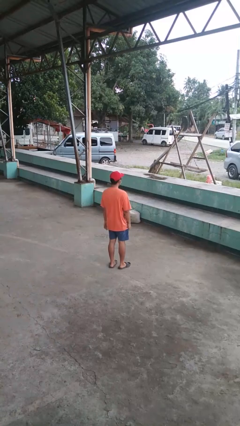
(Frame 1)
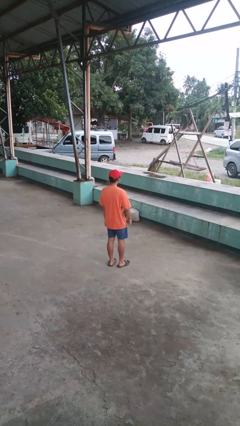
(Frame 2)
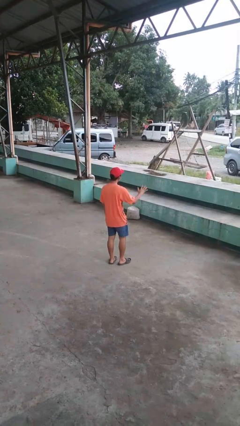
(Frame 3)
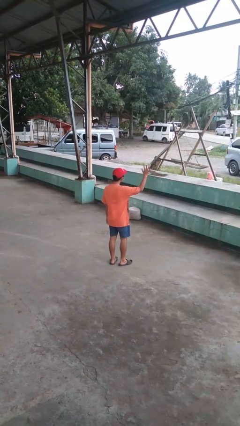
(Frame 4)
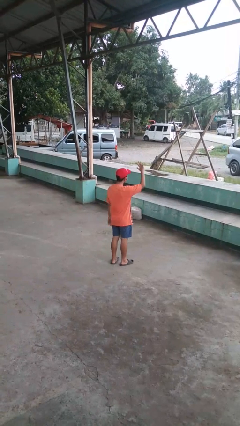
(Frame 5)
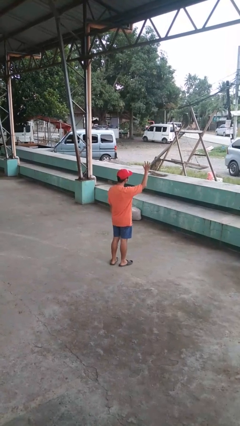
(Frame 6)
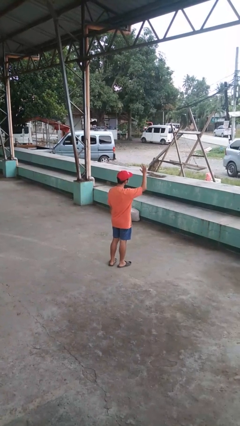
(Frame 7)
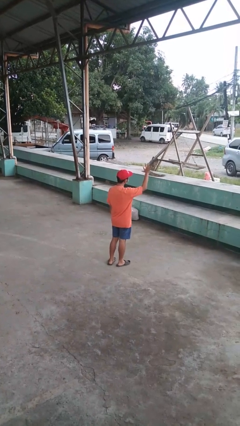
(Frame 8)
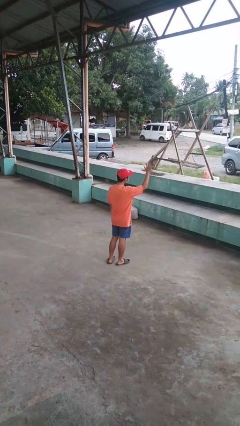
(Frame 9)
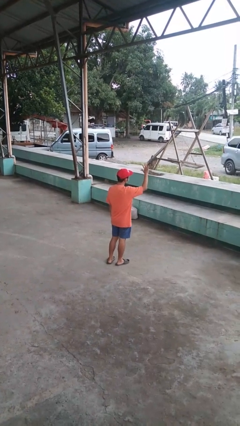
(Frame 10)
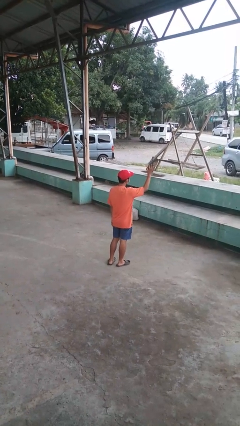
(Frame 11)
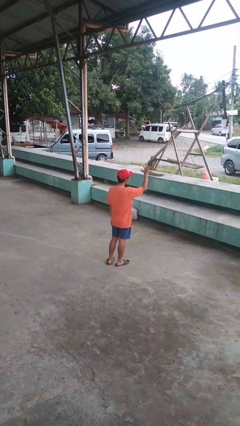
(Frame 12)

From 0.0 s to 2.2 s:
person waves at person

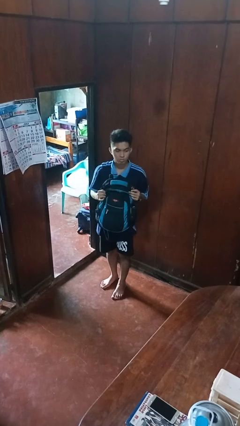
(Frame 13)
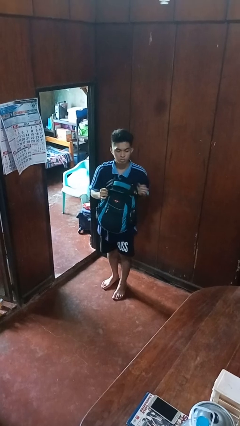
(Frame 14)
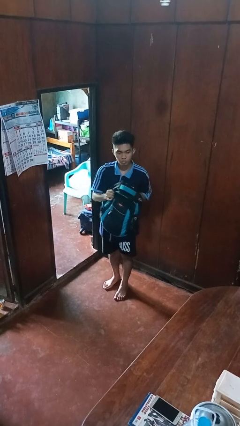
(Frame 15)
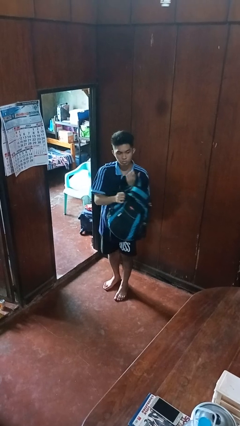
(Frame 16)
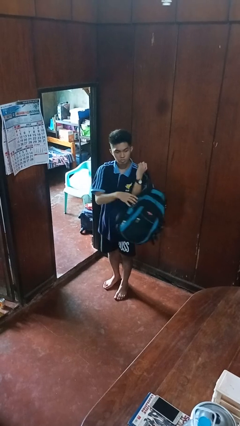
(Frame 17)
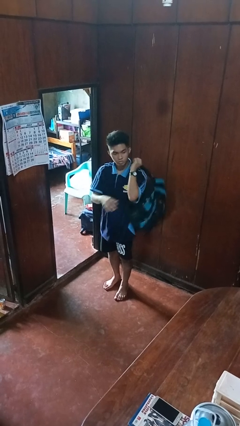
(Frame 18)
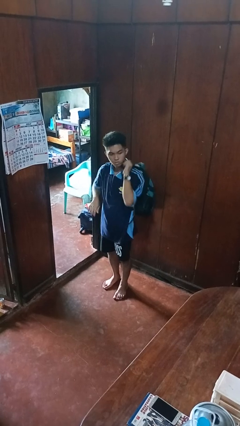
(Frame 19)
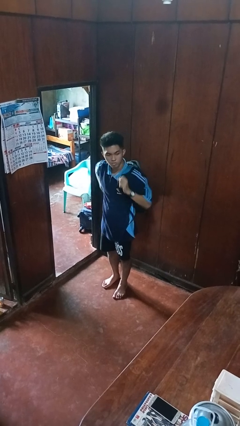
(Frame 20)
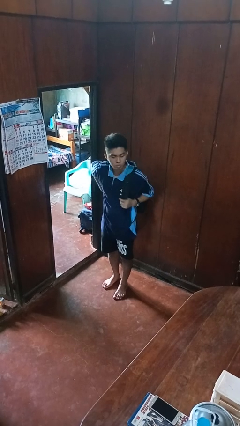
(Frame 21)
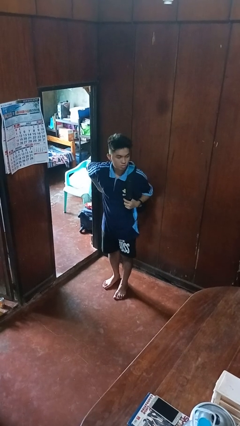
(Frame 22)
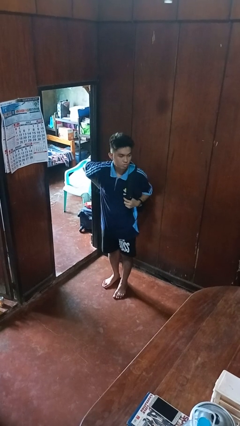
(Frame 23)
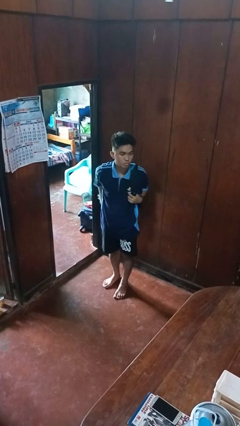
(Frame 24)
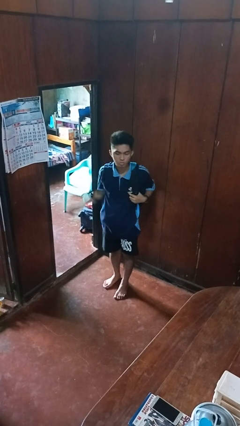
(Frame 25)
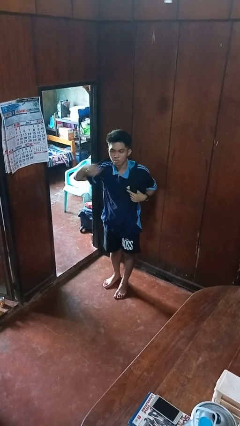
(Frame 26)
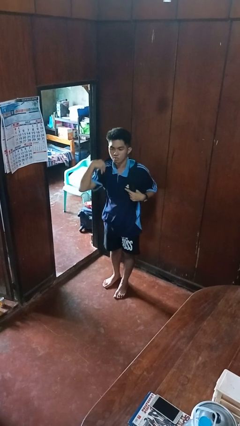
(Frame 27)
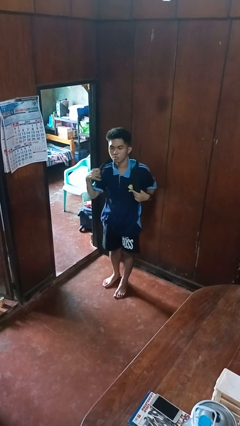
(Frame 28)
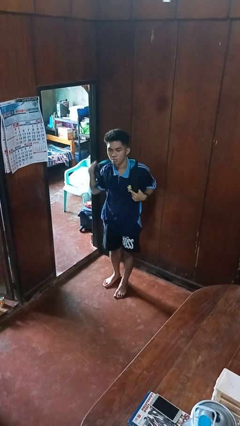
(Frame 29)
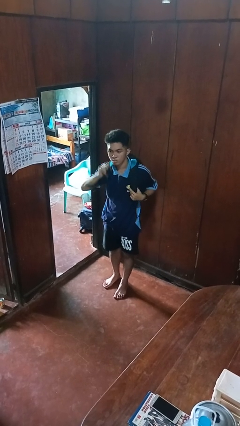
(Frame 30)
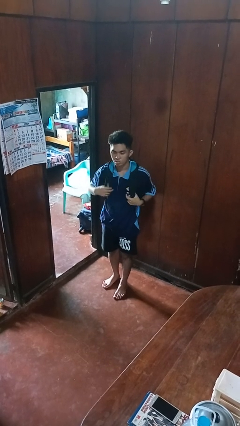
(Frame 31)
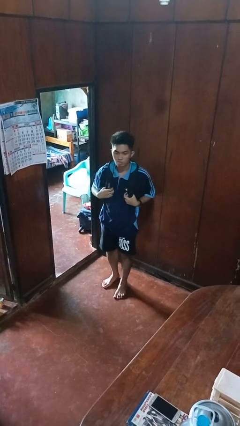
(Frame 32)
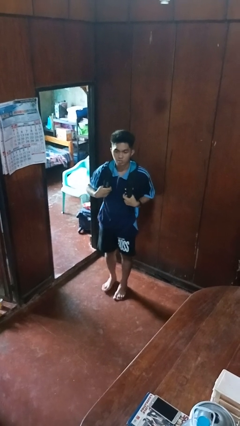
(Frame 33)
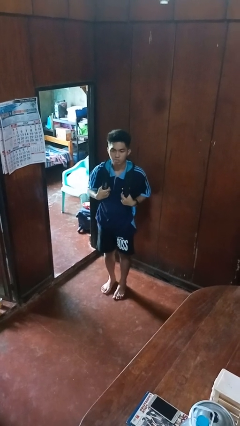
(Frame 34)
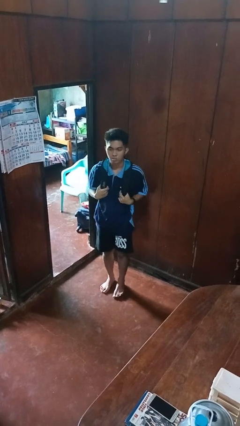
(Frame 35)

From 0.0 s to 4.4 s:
person puts on backpack

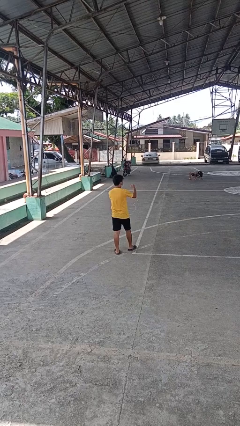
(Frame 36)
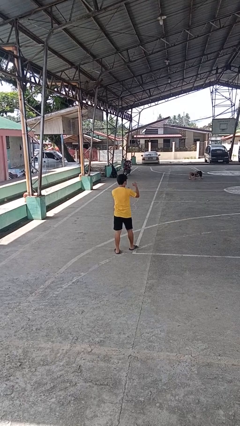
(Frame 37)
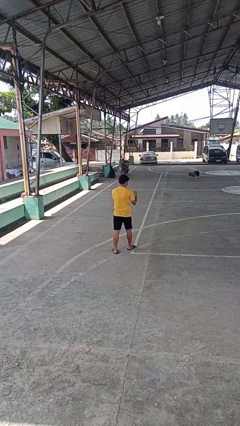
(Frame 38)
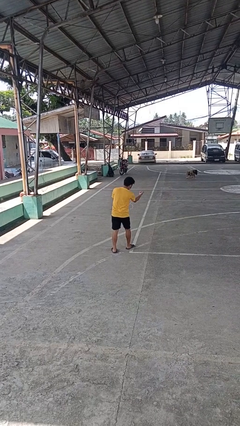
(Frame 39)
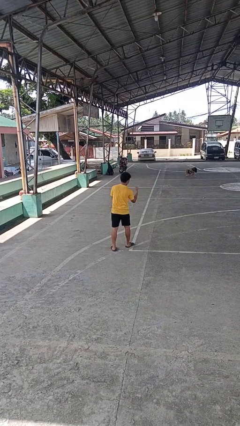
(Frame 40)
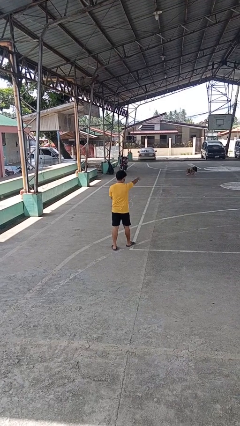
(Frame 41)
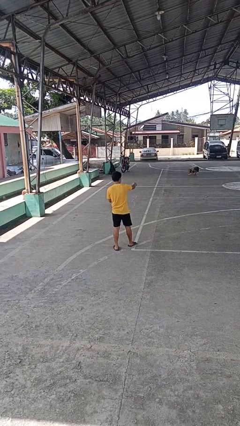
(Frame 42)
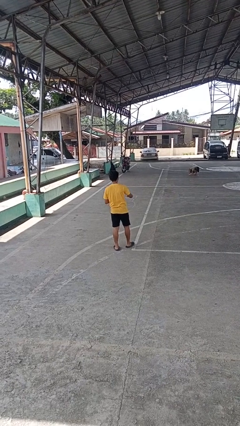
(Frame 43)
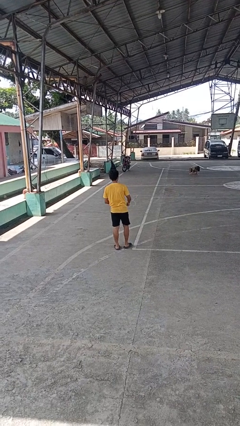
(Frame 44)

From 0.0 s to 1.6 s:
person punches

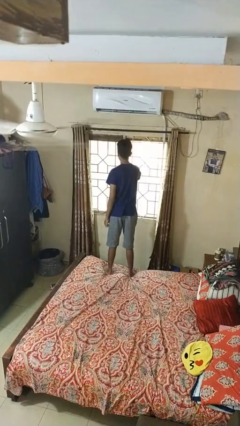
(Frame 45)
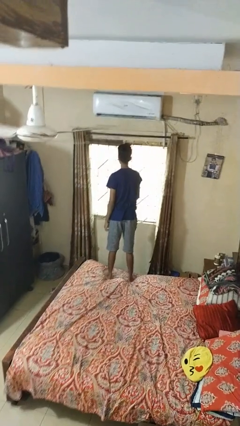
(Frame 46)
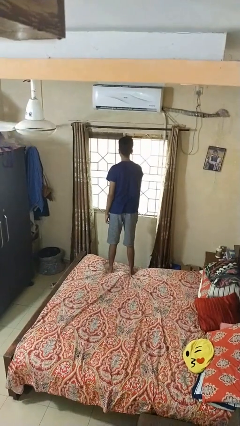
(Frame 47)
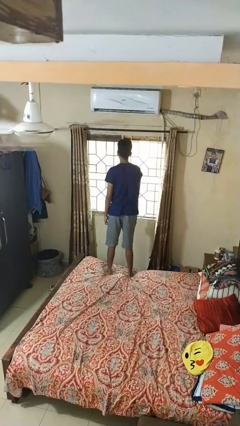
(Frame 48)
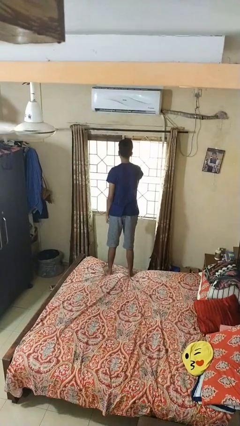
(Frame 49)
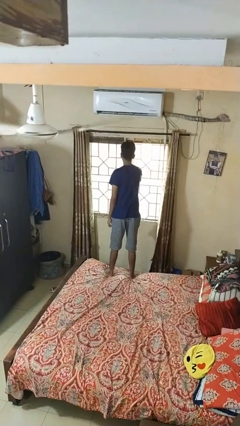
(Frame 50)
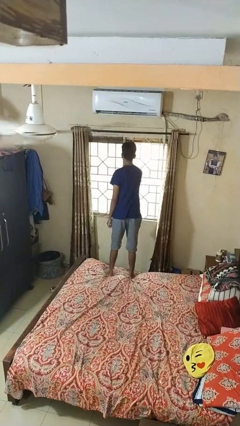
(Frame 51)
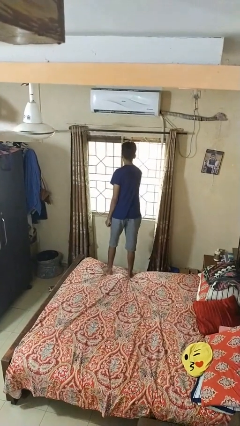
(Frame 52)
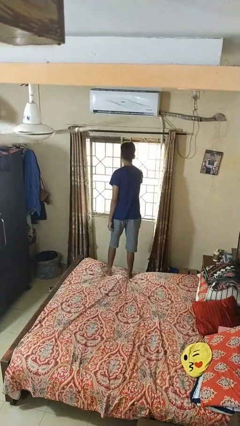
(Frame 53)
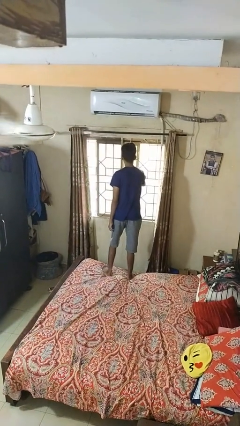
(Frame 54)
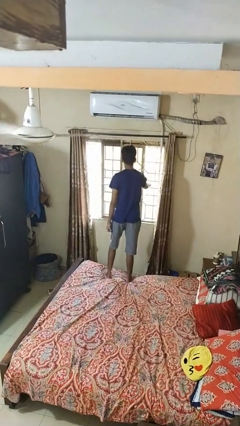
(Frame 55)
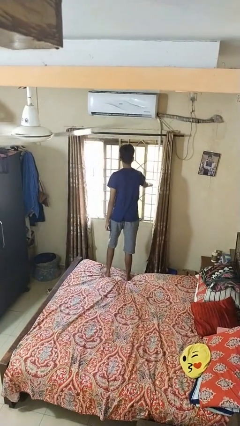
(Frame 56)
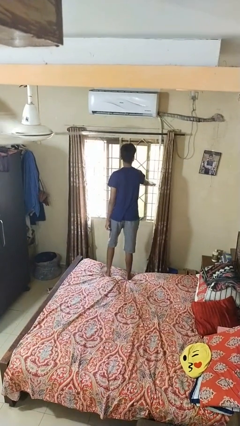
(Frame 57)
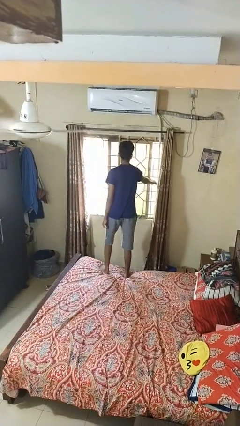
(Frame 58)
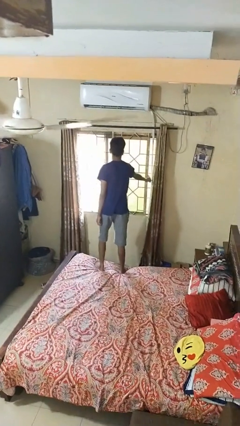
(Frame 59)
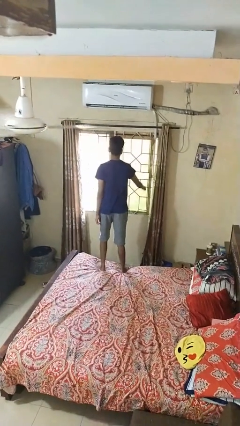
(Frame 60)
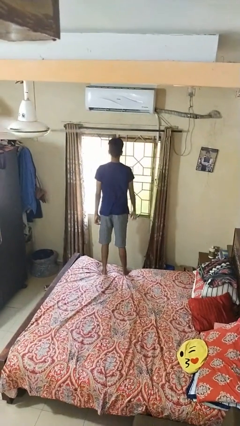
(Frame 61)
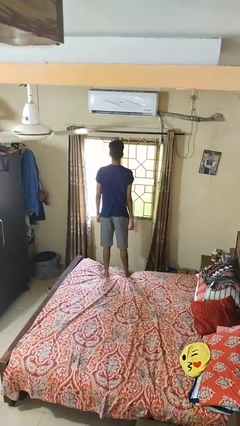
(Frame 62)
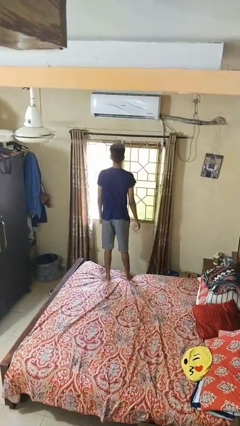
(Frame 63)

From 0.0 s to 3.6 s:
person opens home window

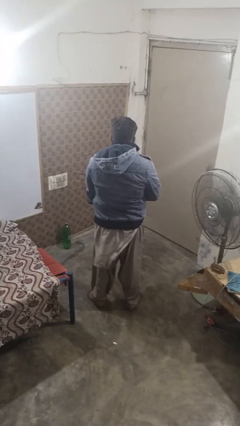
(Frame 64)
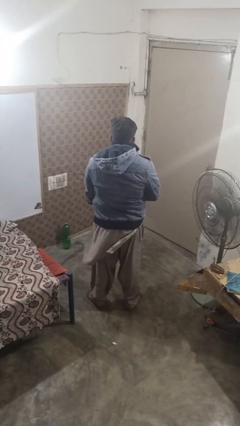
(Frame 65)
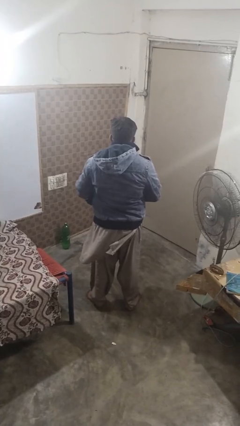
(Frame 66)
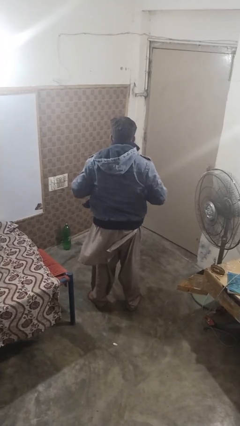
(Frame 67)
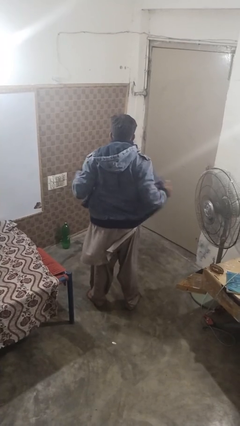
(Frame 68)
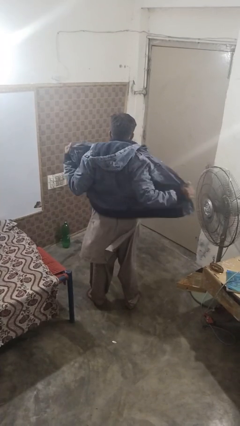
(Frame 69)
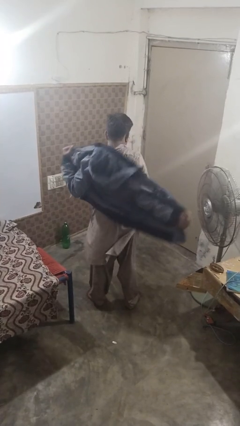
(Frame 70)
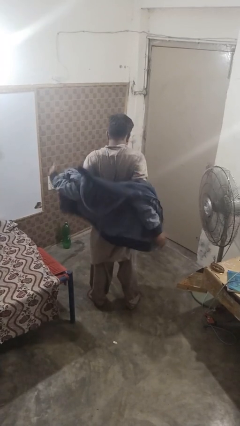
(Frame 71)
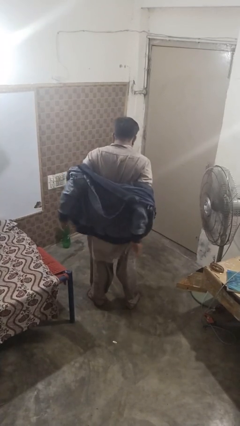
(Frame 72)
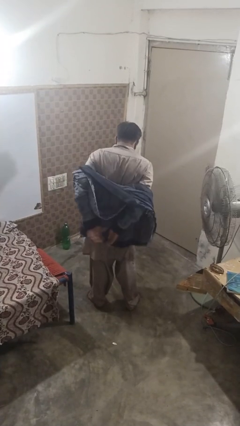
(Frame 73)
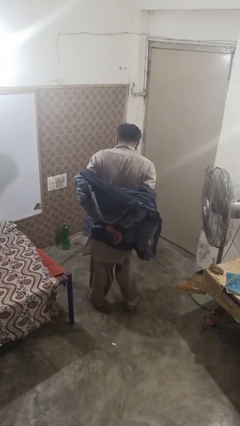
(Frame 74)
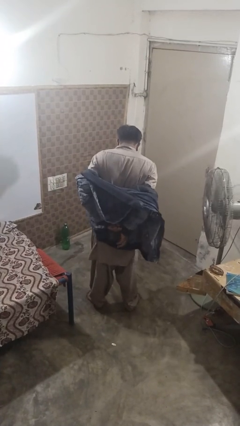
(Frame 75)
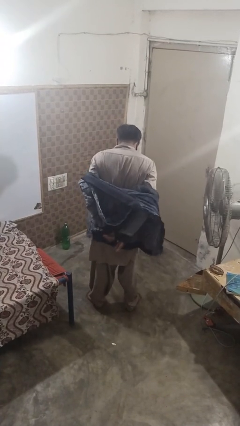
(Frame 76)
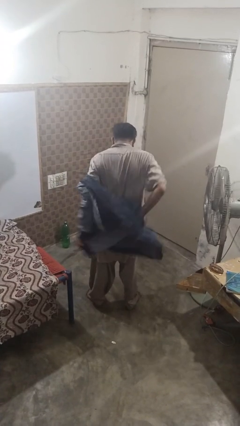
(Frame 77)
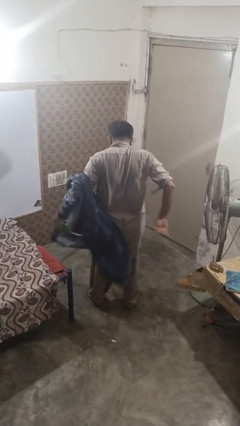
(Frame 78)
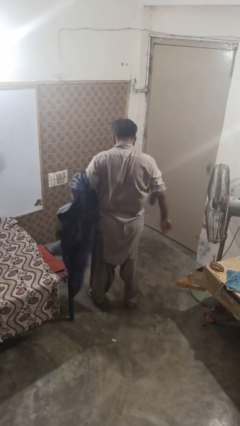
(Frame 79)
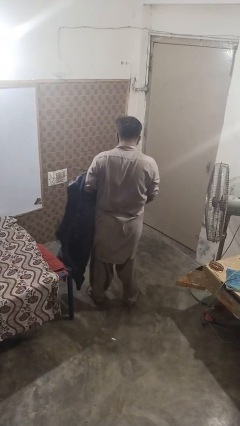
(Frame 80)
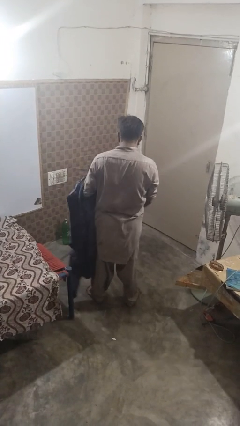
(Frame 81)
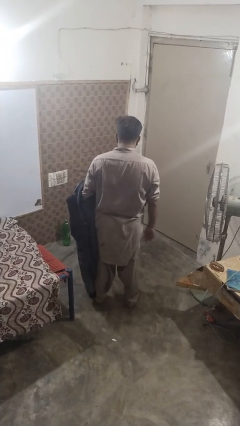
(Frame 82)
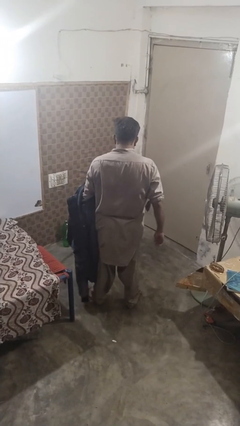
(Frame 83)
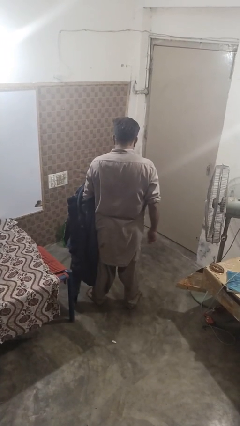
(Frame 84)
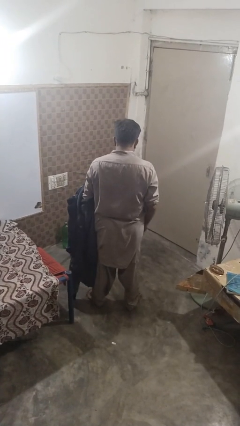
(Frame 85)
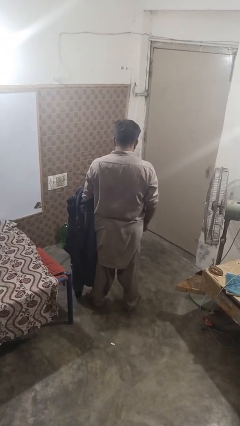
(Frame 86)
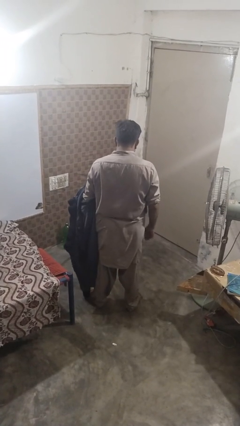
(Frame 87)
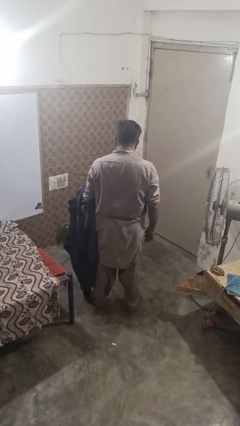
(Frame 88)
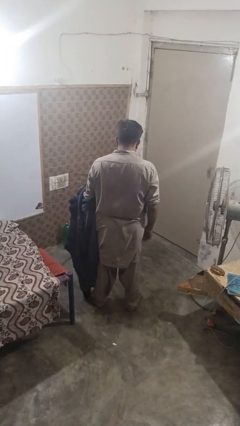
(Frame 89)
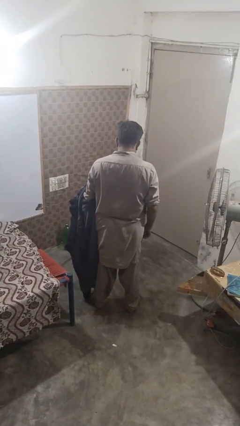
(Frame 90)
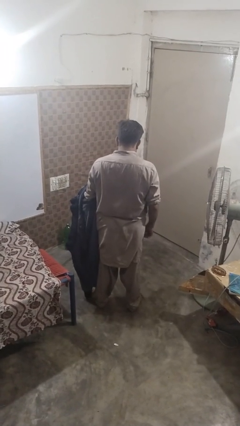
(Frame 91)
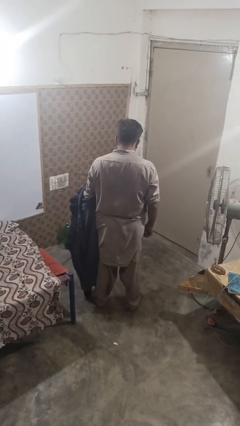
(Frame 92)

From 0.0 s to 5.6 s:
person takes off jacket

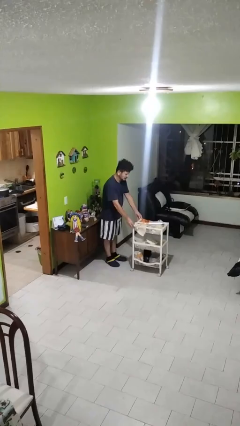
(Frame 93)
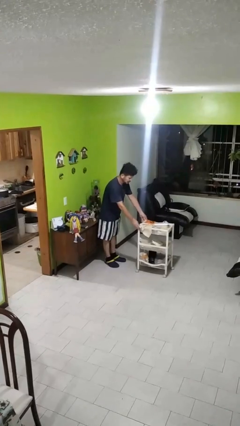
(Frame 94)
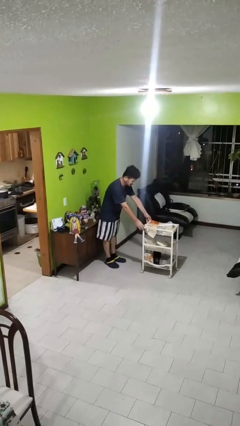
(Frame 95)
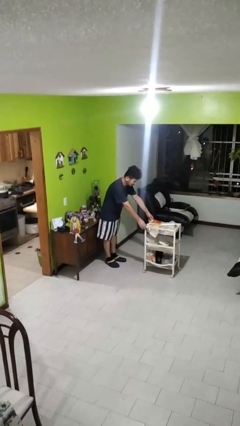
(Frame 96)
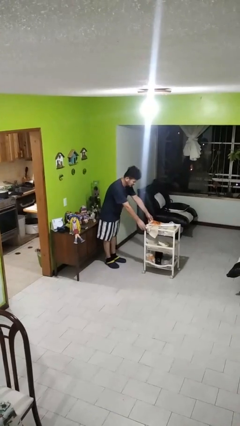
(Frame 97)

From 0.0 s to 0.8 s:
person pushes wheeled cart
